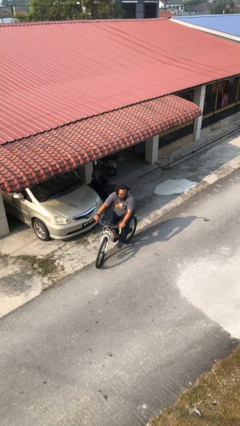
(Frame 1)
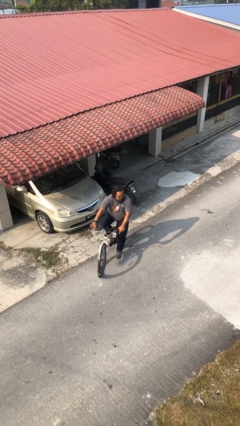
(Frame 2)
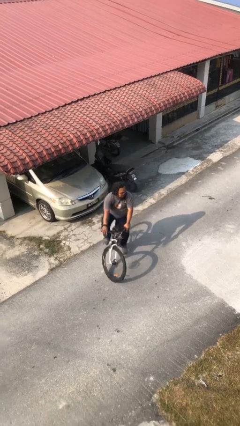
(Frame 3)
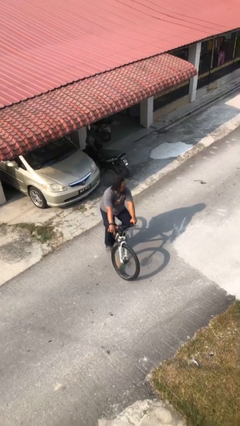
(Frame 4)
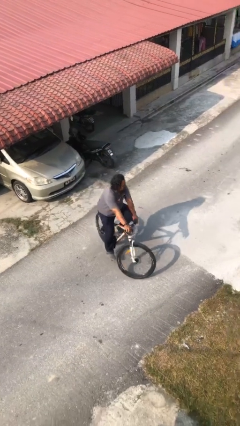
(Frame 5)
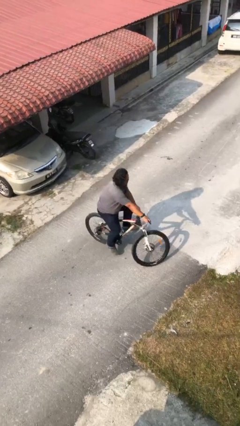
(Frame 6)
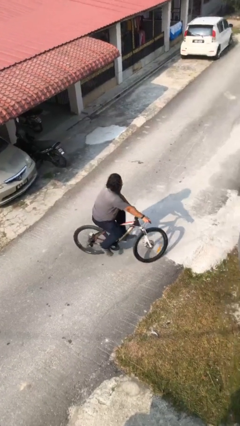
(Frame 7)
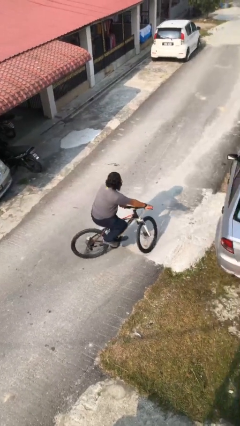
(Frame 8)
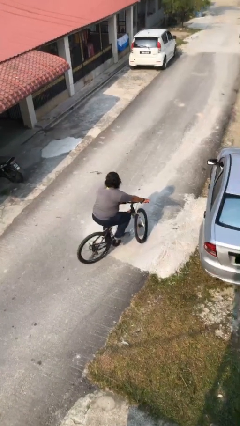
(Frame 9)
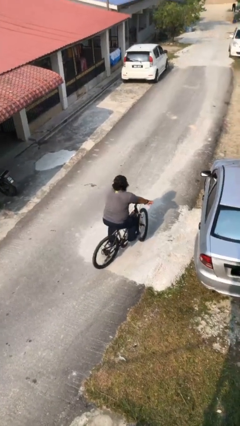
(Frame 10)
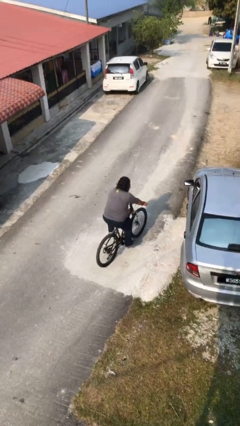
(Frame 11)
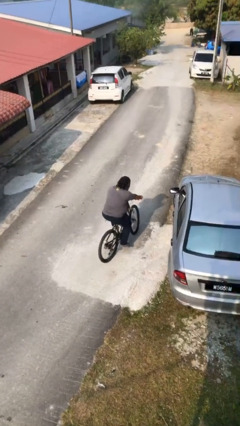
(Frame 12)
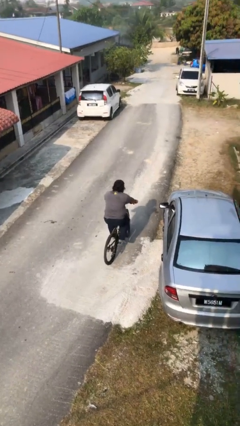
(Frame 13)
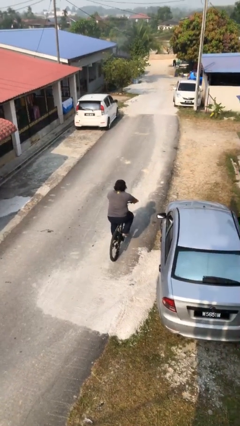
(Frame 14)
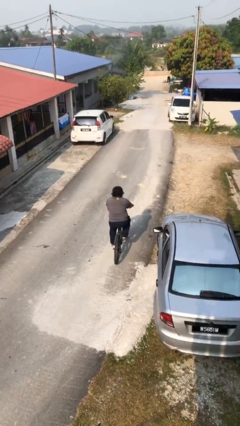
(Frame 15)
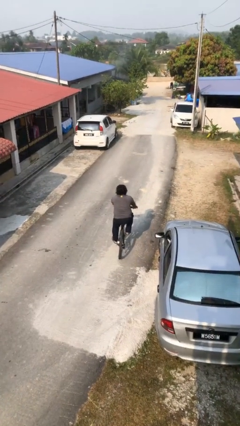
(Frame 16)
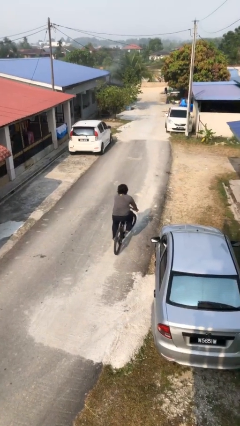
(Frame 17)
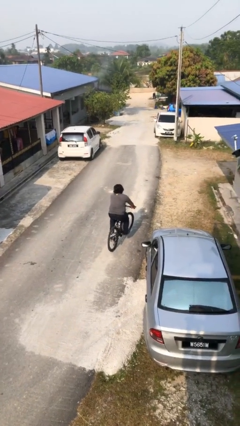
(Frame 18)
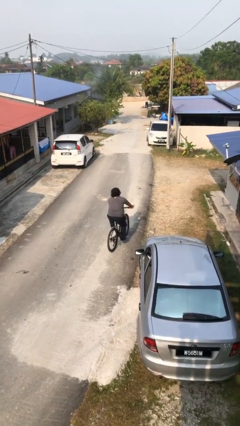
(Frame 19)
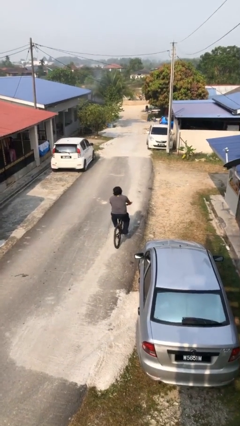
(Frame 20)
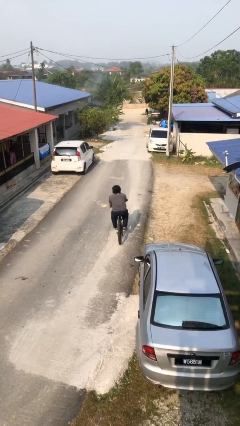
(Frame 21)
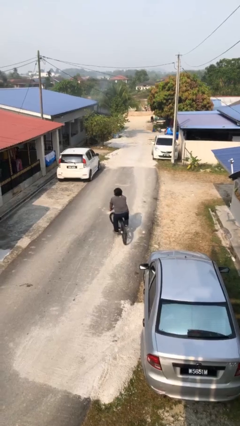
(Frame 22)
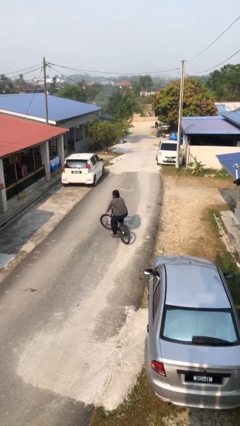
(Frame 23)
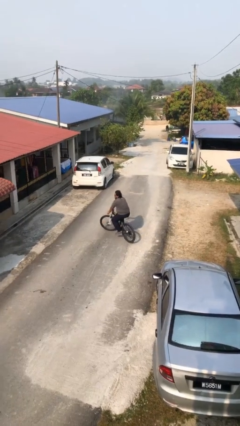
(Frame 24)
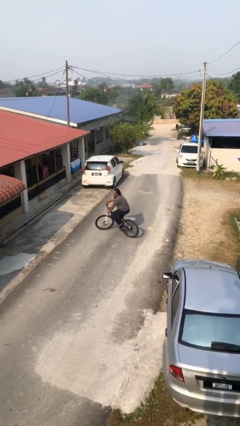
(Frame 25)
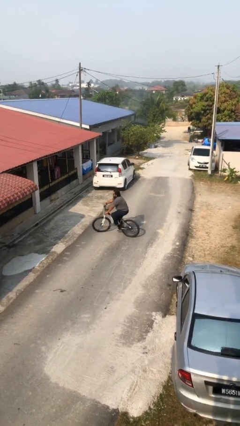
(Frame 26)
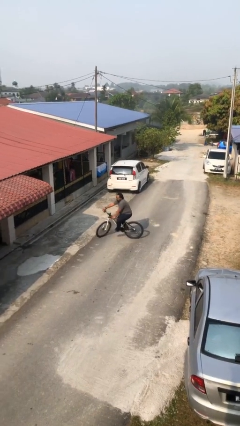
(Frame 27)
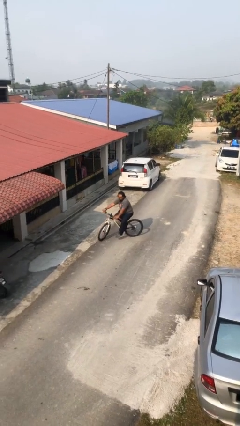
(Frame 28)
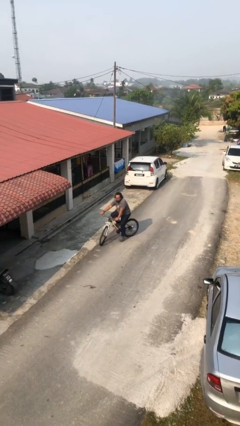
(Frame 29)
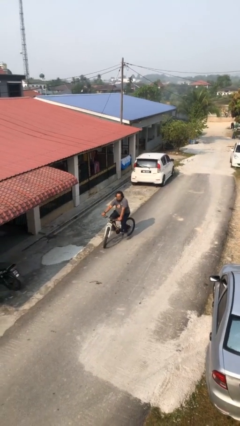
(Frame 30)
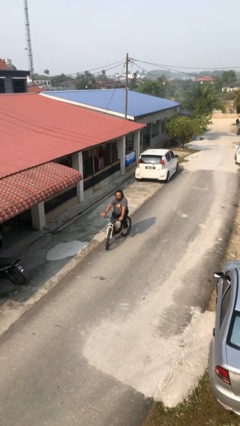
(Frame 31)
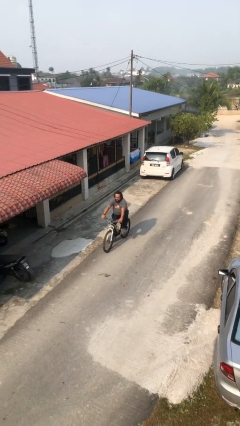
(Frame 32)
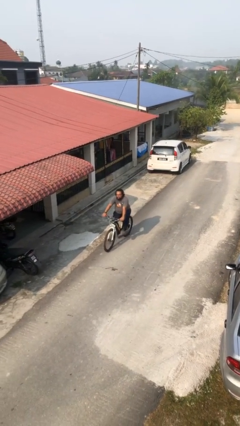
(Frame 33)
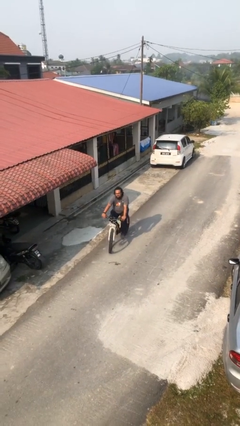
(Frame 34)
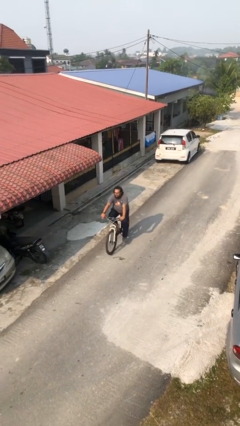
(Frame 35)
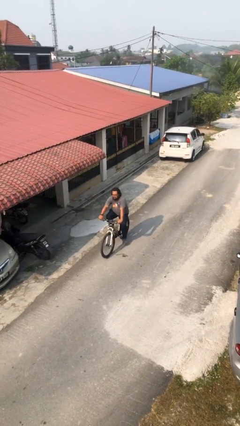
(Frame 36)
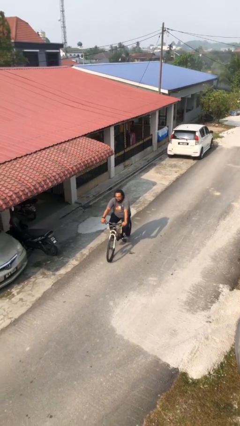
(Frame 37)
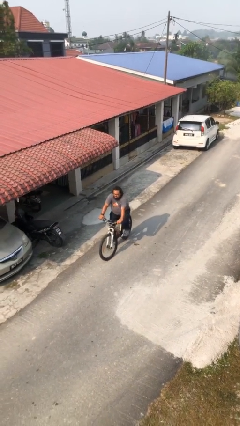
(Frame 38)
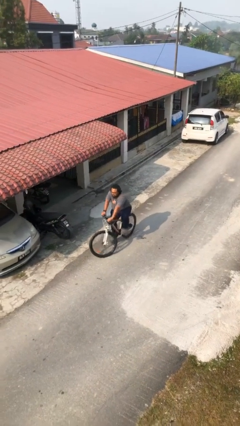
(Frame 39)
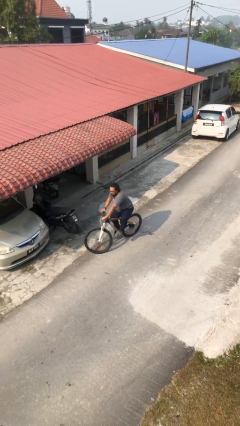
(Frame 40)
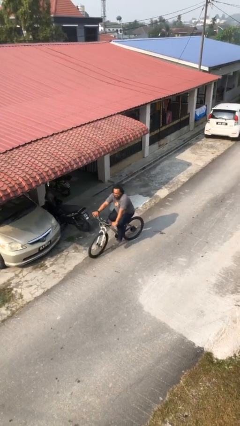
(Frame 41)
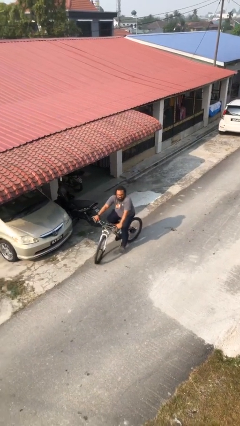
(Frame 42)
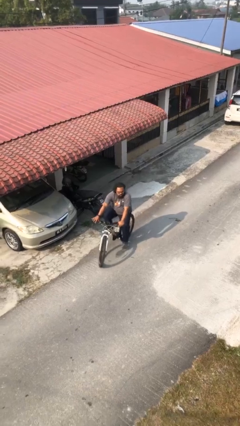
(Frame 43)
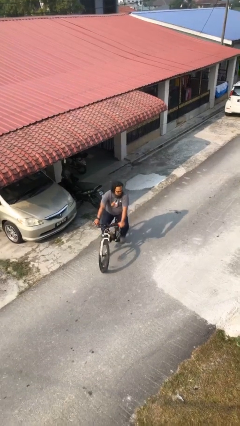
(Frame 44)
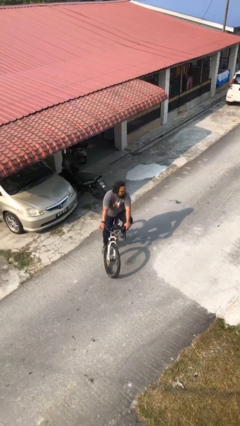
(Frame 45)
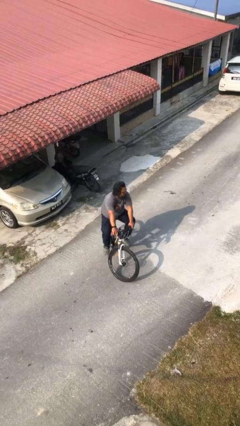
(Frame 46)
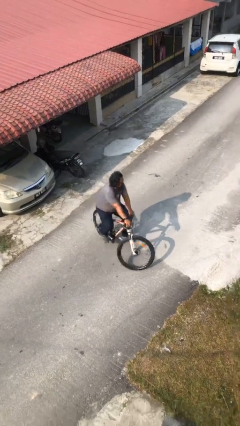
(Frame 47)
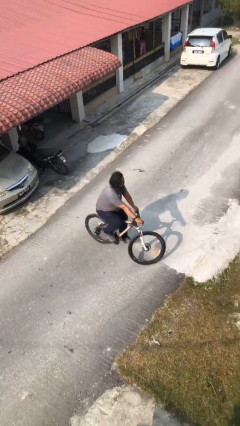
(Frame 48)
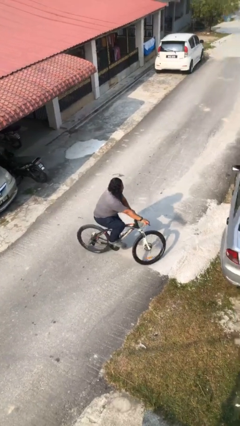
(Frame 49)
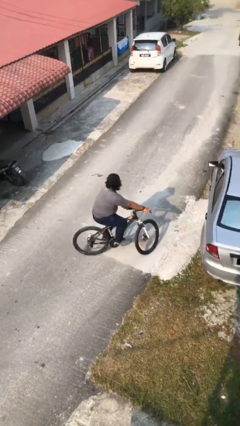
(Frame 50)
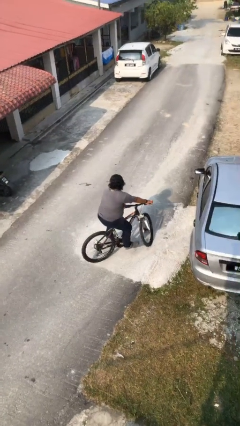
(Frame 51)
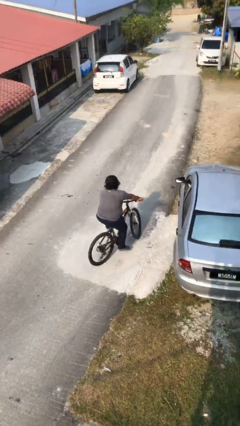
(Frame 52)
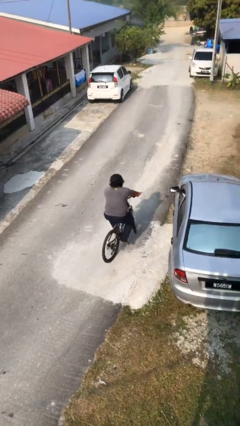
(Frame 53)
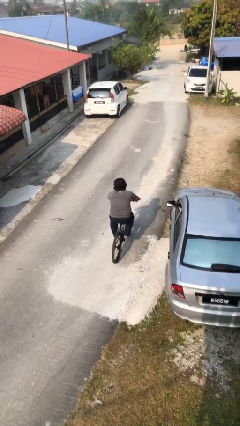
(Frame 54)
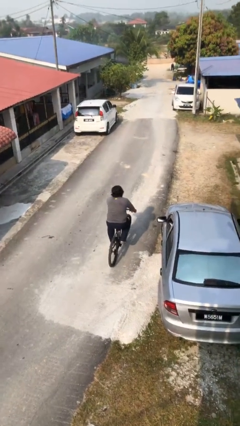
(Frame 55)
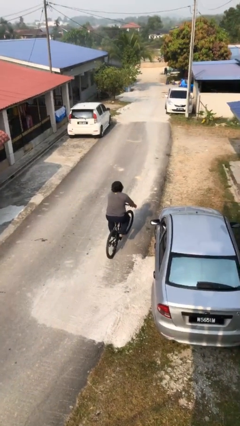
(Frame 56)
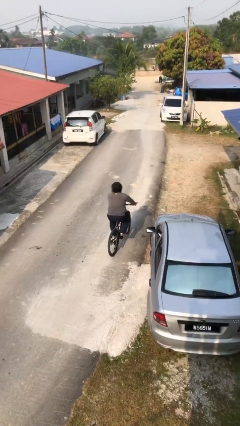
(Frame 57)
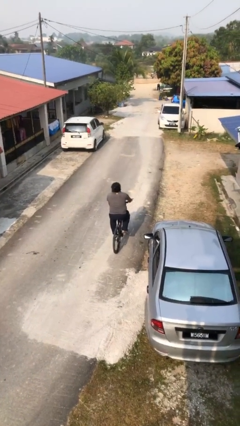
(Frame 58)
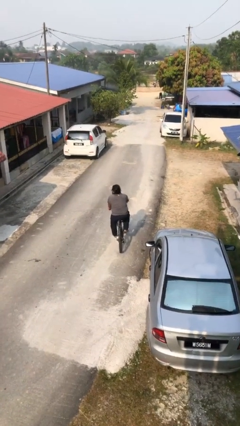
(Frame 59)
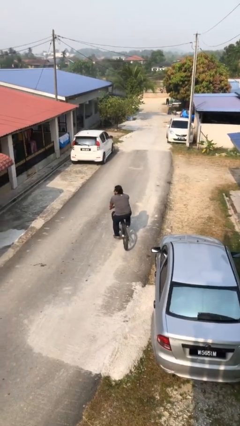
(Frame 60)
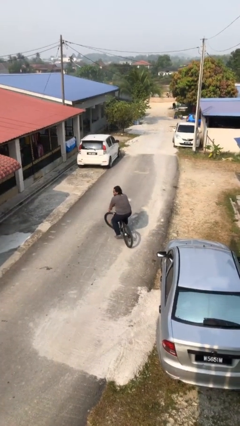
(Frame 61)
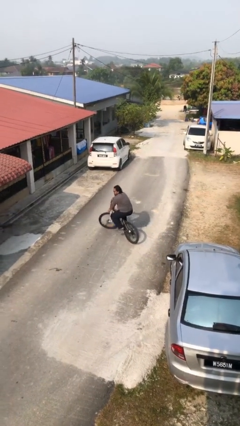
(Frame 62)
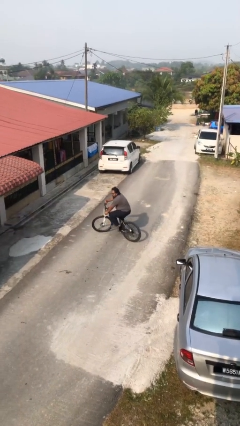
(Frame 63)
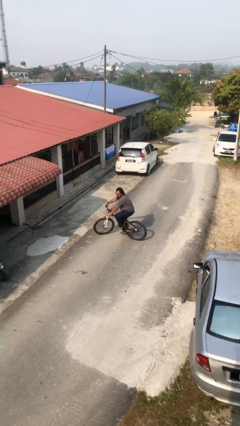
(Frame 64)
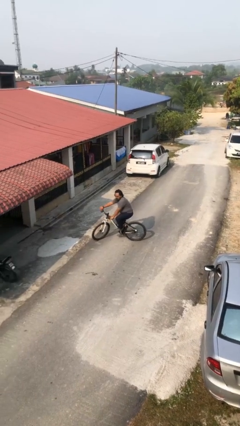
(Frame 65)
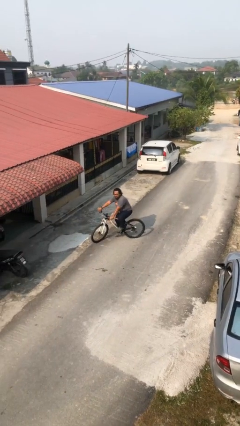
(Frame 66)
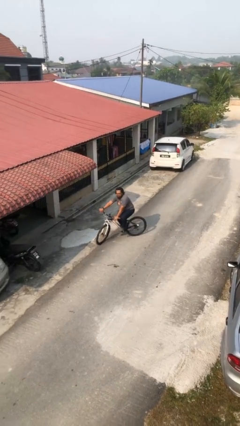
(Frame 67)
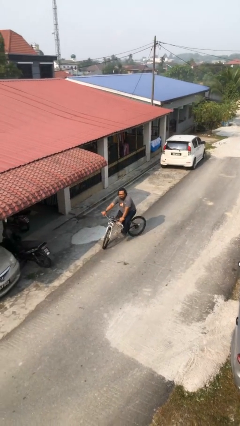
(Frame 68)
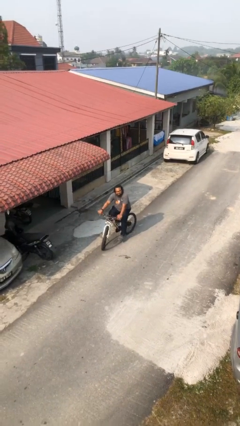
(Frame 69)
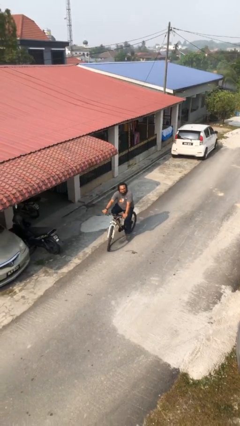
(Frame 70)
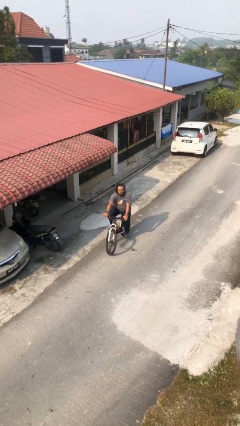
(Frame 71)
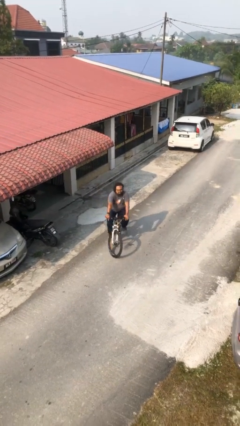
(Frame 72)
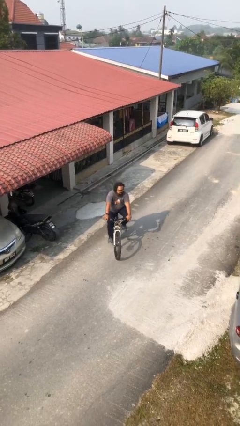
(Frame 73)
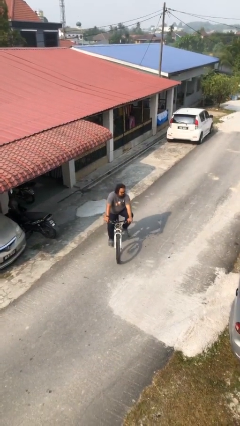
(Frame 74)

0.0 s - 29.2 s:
person rides bicycle

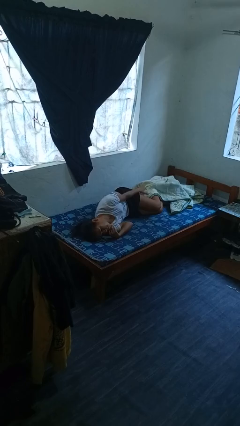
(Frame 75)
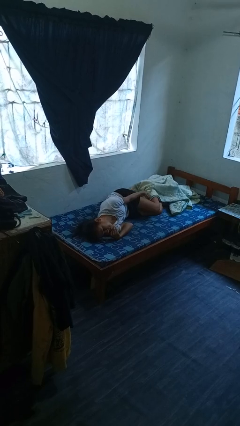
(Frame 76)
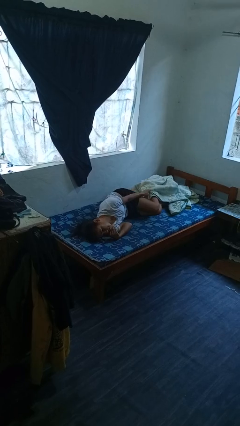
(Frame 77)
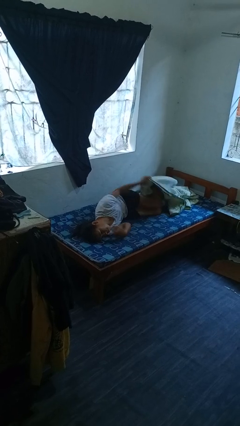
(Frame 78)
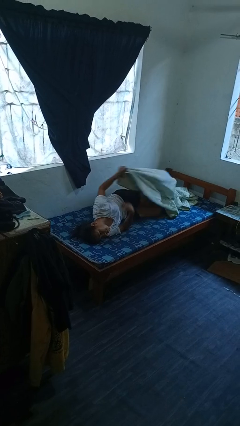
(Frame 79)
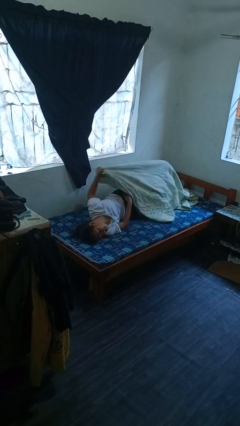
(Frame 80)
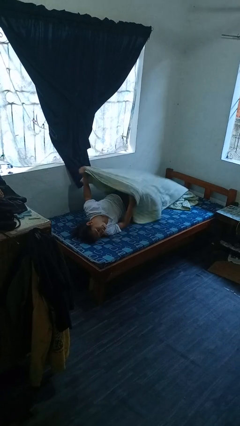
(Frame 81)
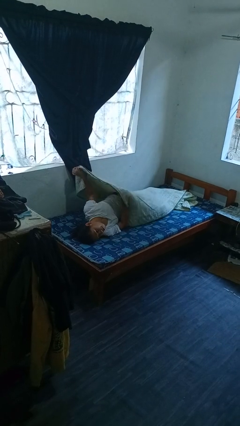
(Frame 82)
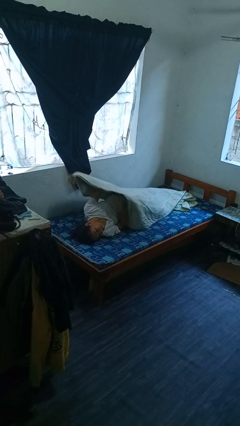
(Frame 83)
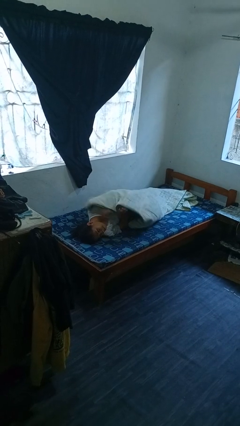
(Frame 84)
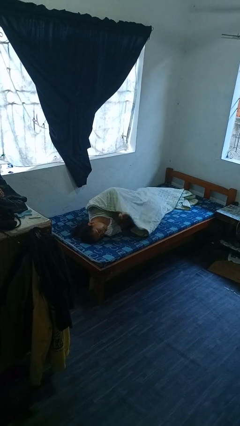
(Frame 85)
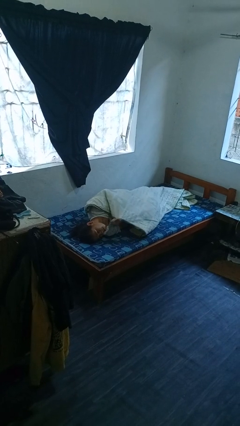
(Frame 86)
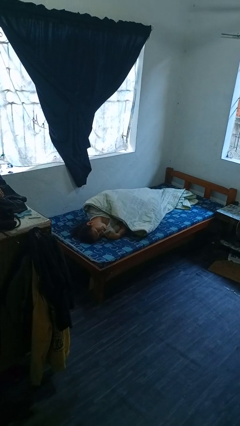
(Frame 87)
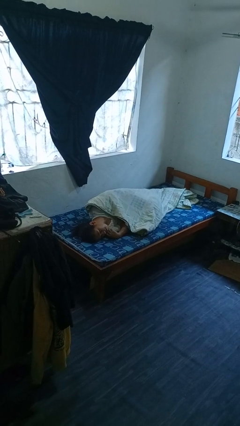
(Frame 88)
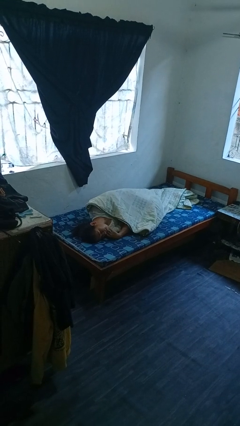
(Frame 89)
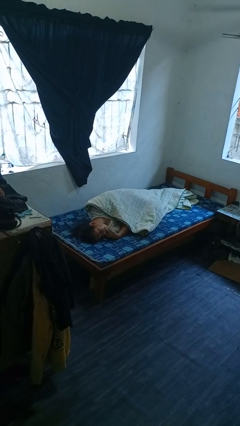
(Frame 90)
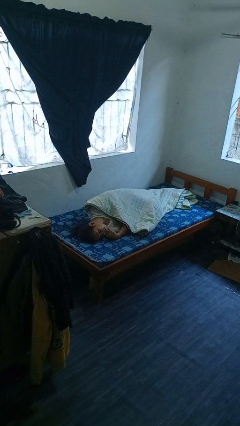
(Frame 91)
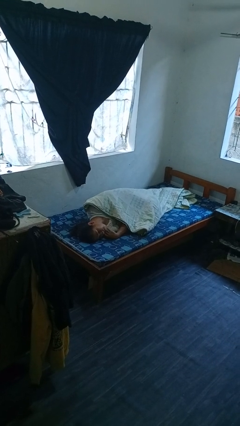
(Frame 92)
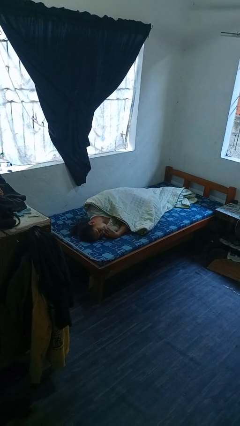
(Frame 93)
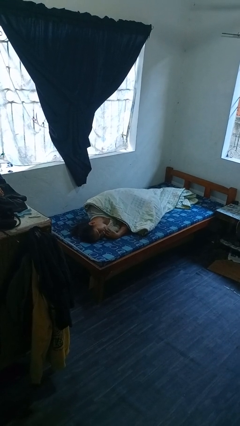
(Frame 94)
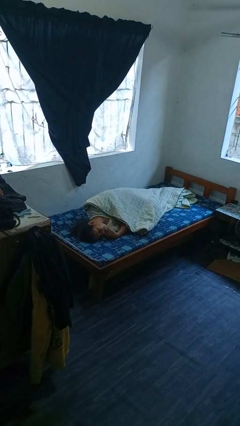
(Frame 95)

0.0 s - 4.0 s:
person covers with bedsheets
